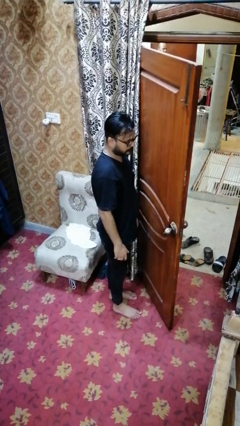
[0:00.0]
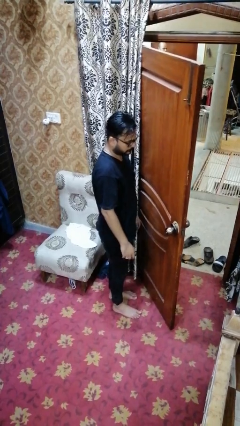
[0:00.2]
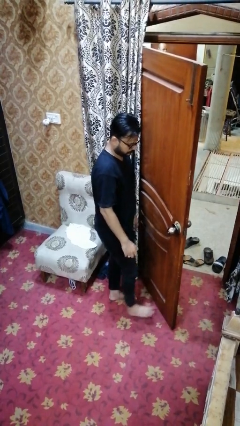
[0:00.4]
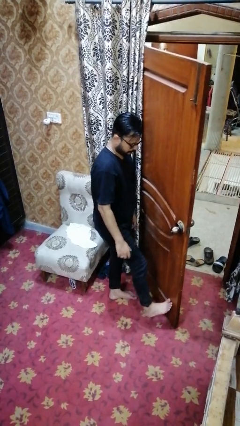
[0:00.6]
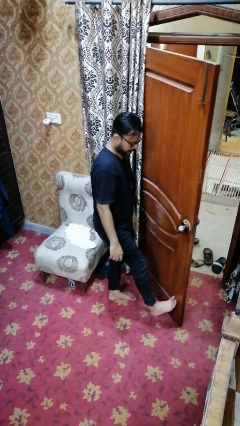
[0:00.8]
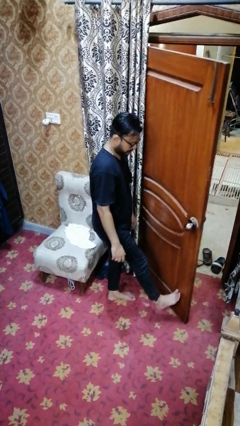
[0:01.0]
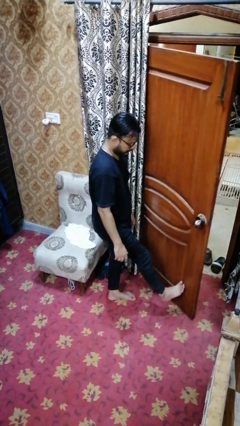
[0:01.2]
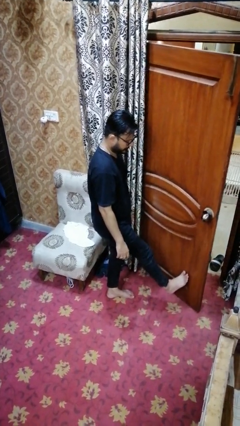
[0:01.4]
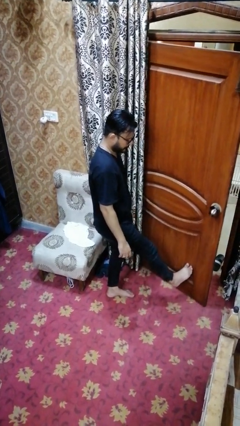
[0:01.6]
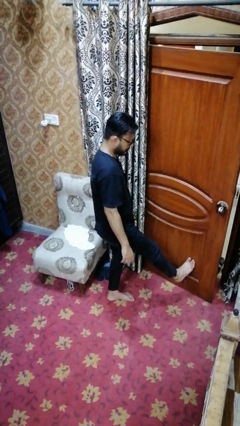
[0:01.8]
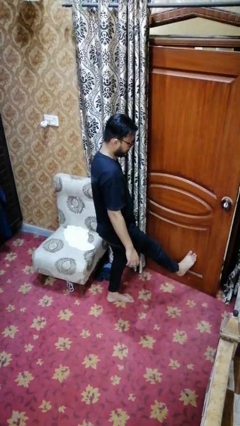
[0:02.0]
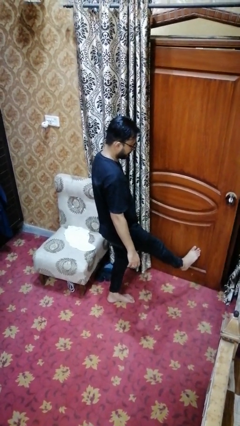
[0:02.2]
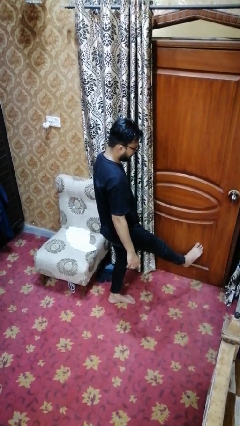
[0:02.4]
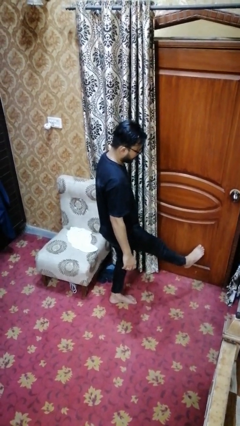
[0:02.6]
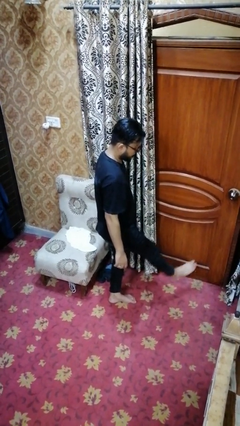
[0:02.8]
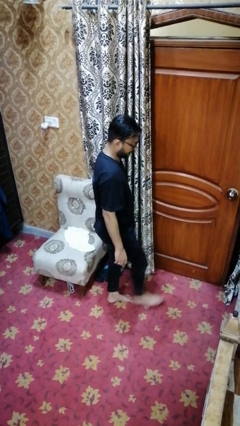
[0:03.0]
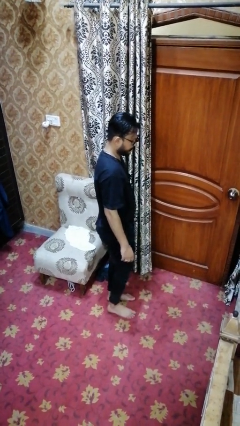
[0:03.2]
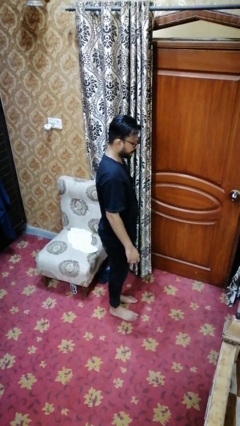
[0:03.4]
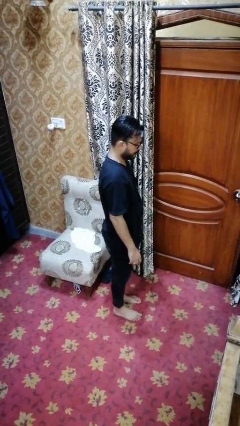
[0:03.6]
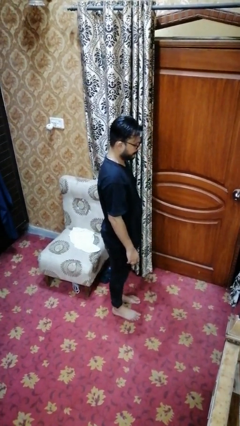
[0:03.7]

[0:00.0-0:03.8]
person closes door with foot

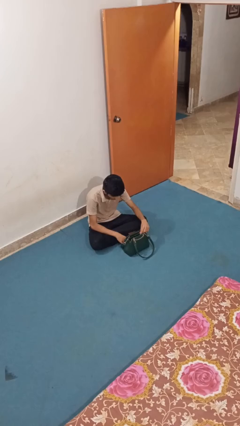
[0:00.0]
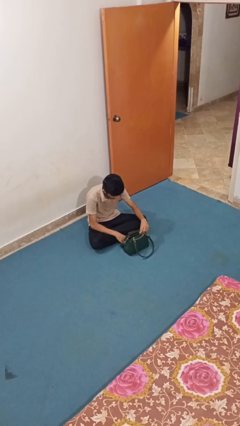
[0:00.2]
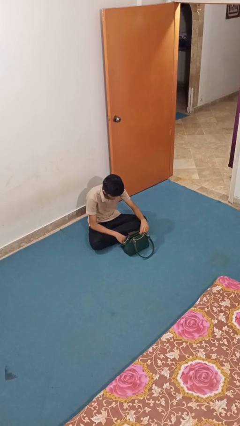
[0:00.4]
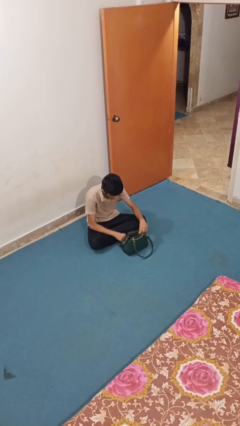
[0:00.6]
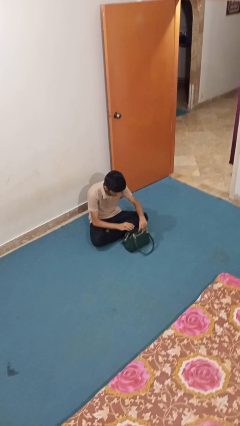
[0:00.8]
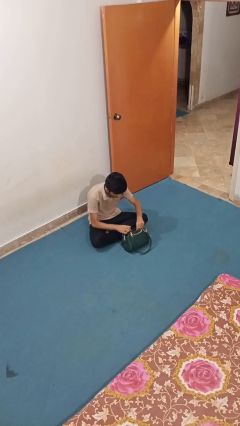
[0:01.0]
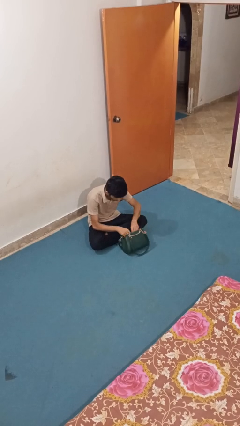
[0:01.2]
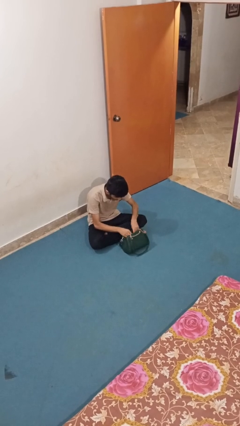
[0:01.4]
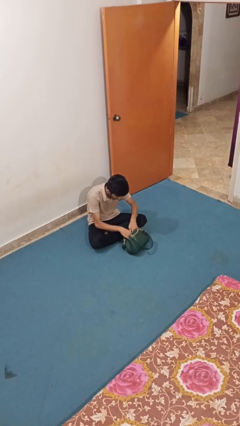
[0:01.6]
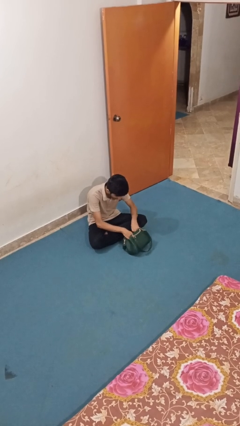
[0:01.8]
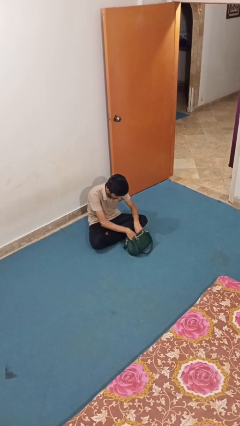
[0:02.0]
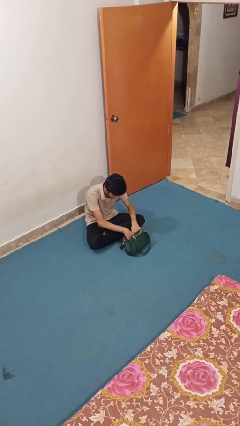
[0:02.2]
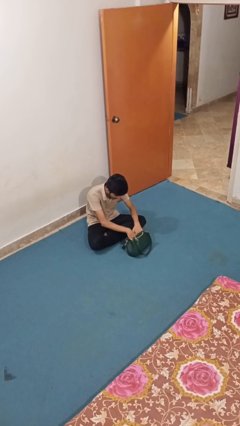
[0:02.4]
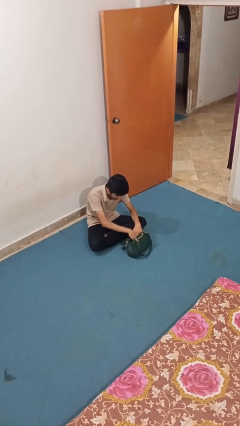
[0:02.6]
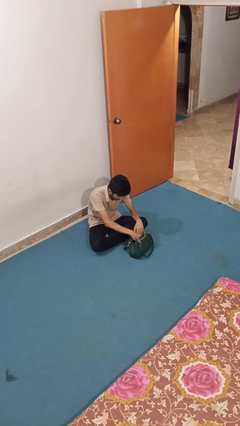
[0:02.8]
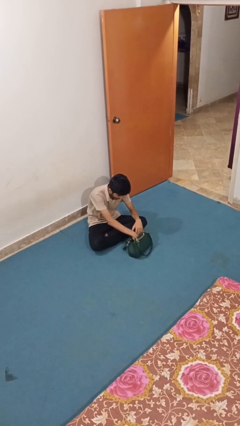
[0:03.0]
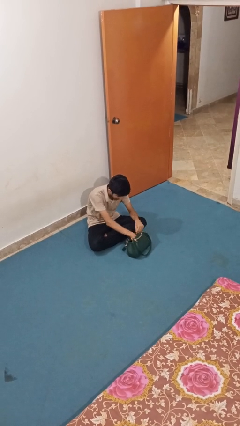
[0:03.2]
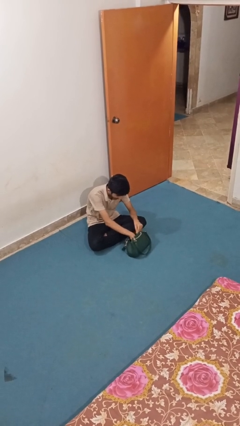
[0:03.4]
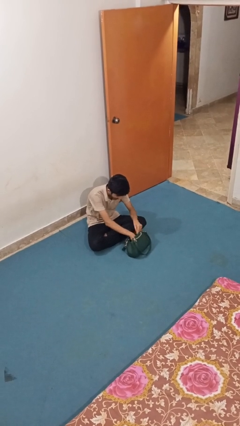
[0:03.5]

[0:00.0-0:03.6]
person searches in purse

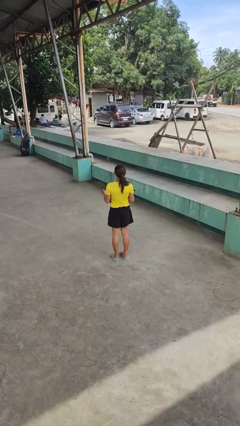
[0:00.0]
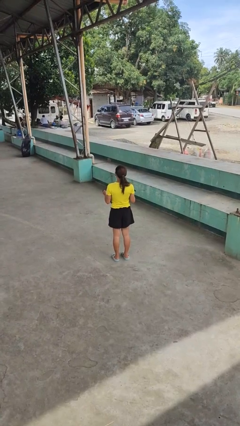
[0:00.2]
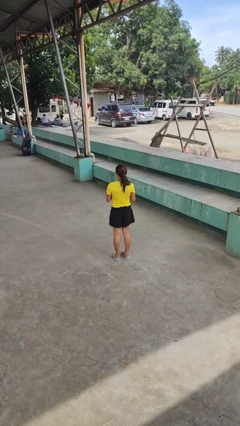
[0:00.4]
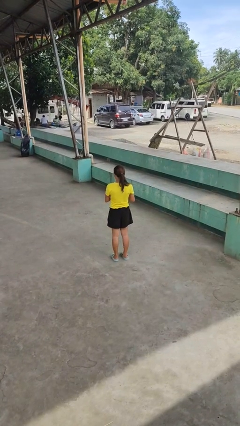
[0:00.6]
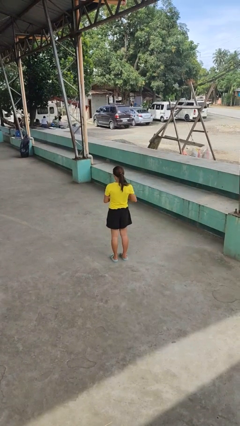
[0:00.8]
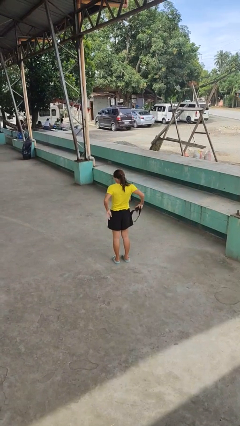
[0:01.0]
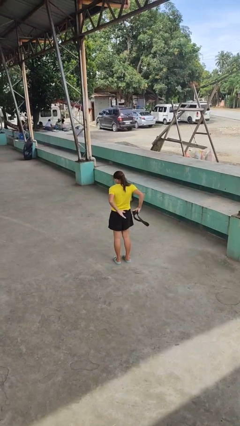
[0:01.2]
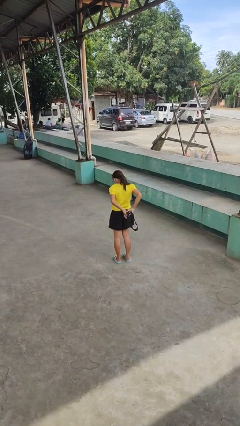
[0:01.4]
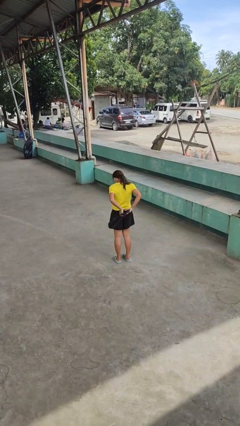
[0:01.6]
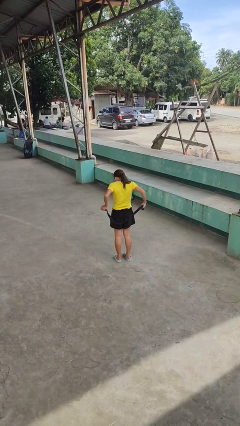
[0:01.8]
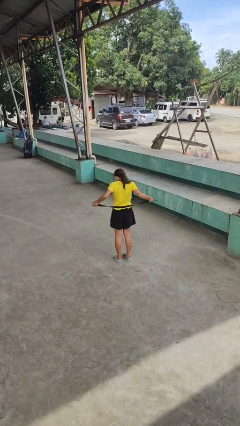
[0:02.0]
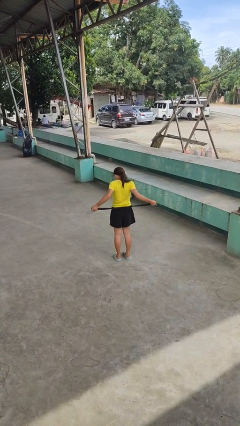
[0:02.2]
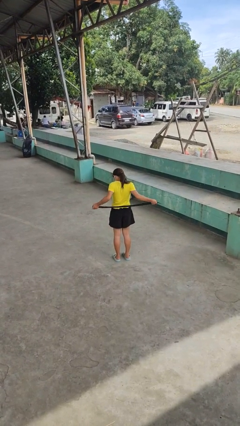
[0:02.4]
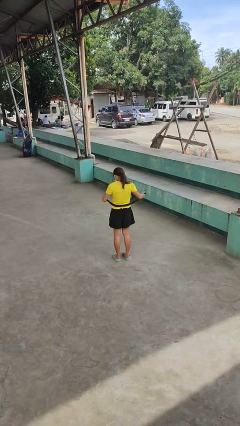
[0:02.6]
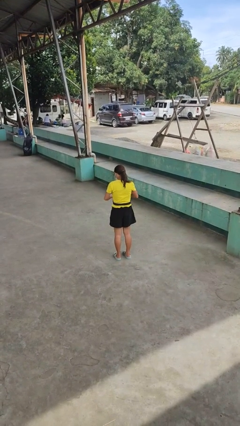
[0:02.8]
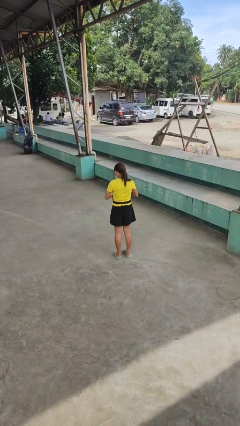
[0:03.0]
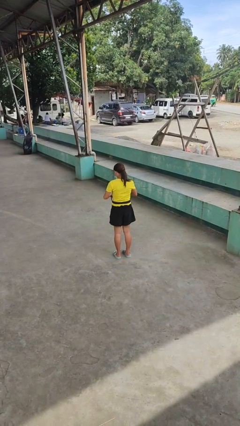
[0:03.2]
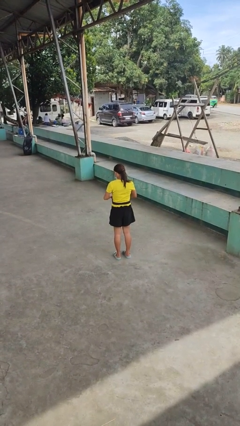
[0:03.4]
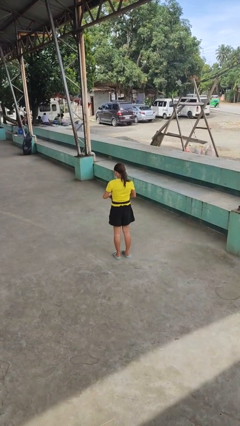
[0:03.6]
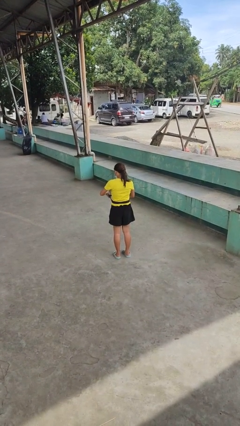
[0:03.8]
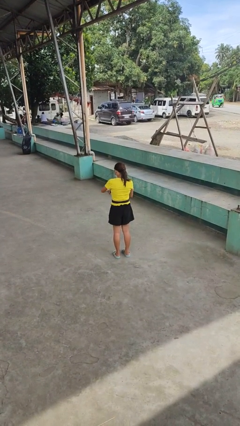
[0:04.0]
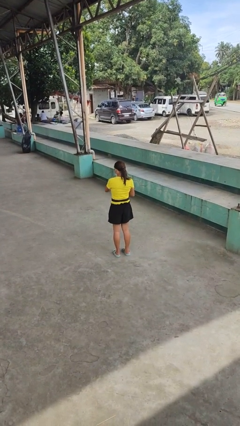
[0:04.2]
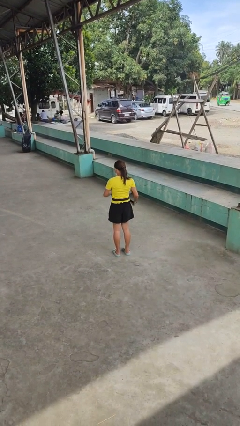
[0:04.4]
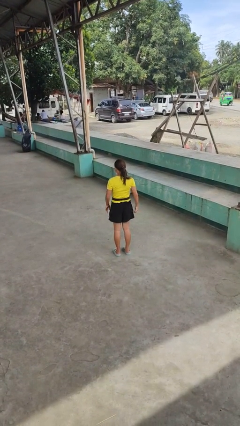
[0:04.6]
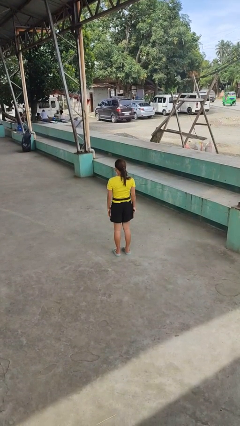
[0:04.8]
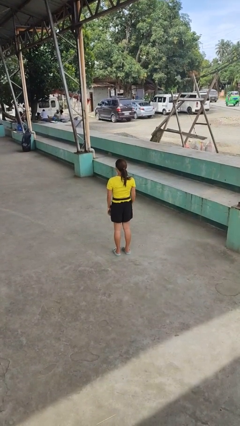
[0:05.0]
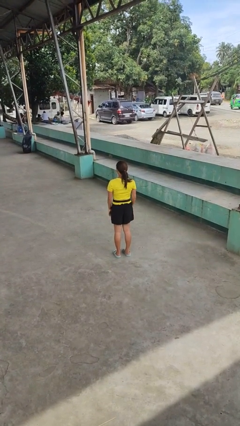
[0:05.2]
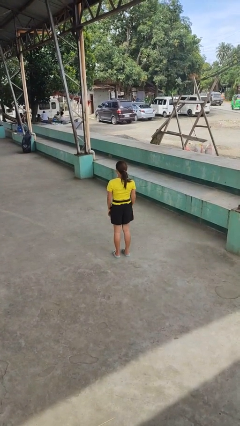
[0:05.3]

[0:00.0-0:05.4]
person puts on belt

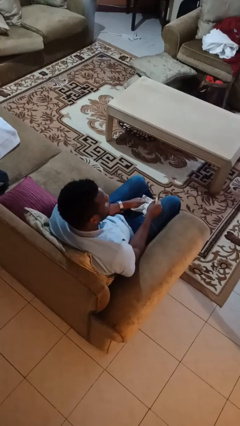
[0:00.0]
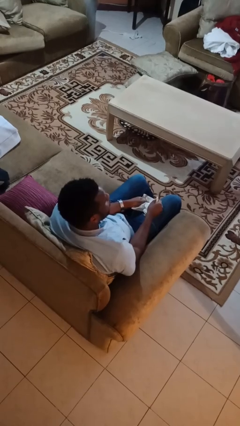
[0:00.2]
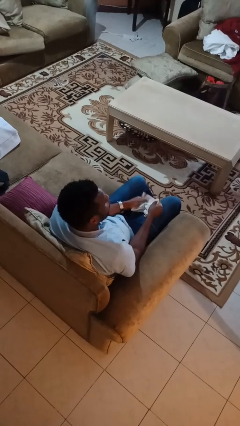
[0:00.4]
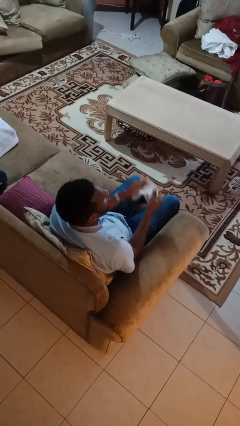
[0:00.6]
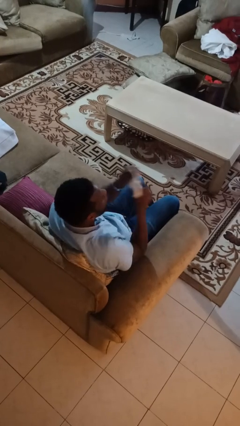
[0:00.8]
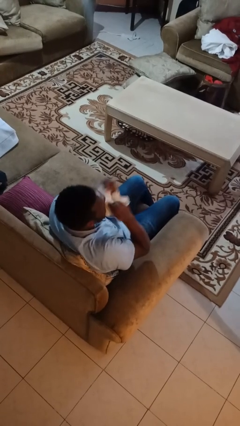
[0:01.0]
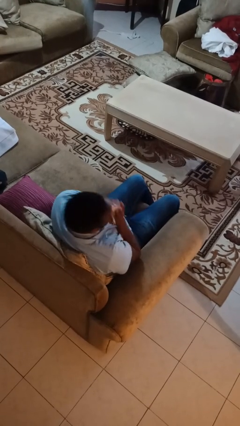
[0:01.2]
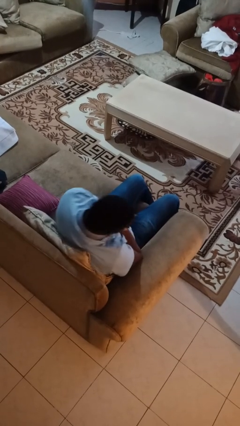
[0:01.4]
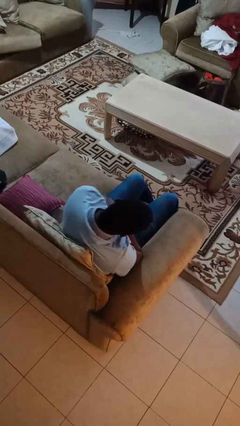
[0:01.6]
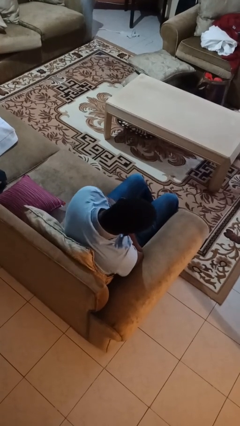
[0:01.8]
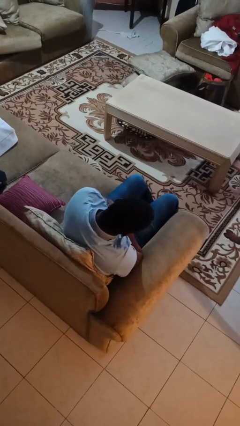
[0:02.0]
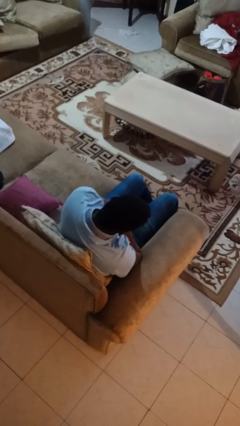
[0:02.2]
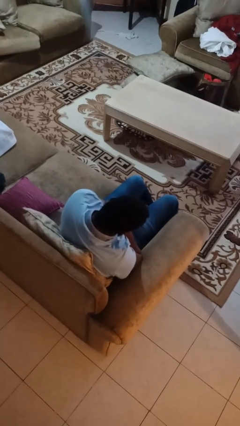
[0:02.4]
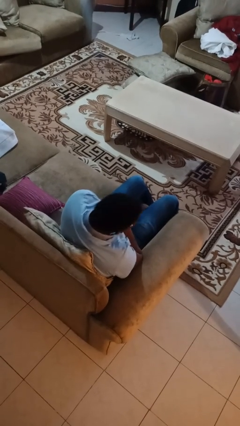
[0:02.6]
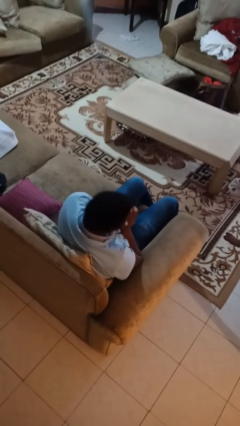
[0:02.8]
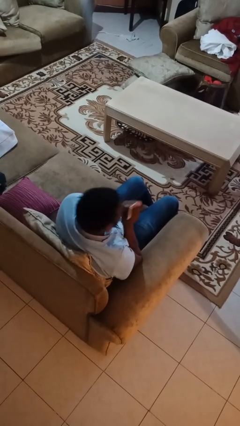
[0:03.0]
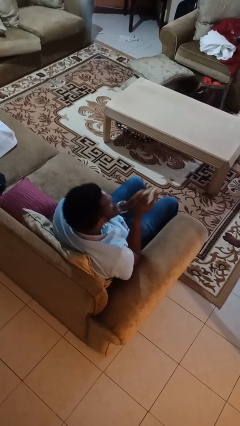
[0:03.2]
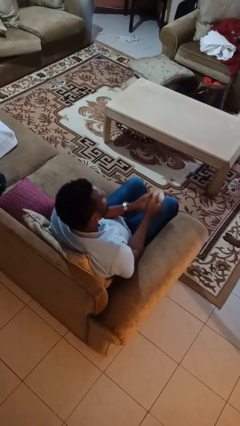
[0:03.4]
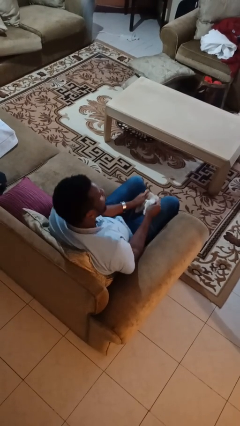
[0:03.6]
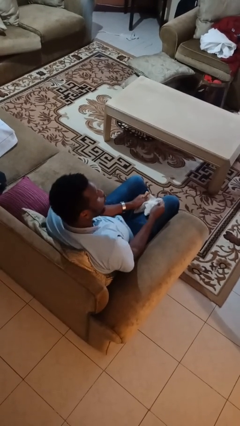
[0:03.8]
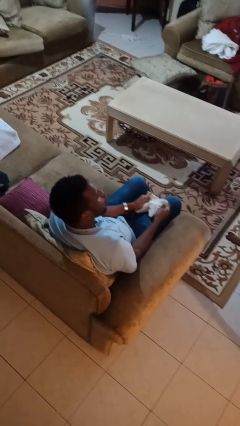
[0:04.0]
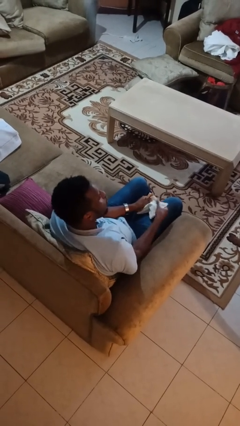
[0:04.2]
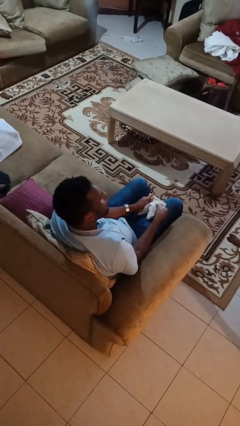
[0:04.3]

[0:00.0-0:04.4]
person blows nose

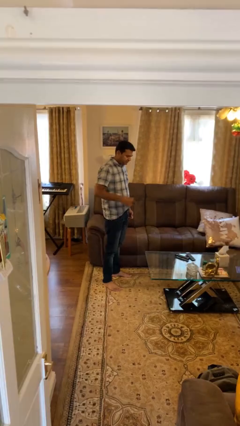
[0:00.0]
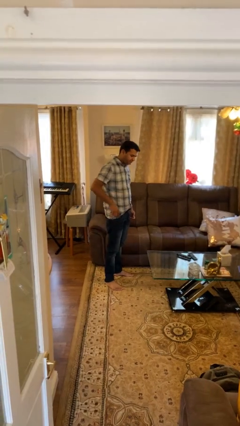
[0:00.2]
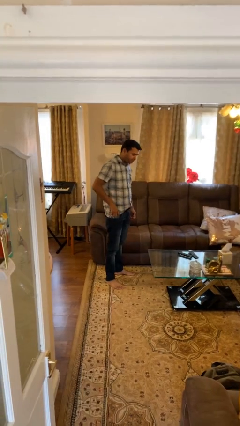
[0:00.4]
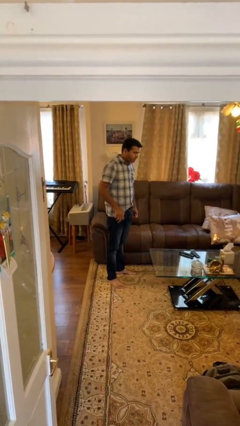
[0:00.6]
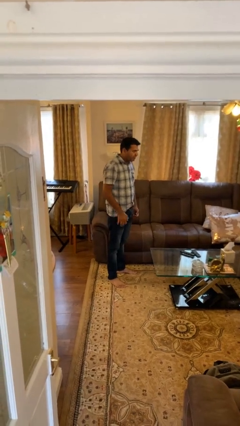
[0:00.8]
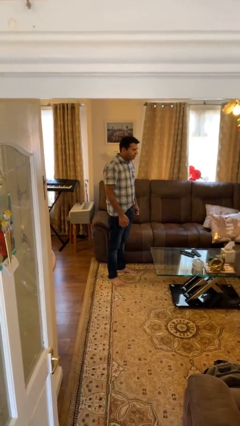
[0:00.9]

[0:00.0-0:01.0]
person puts phone into pocket
